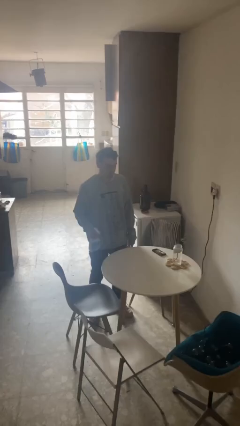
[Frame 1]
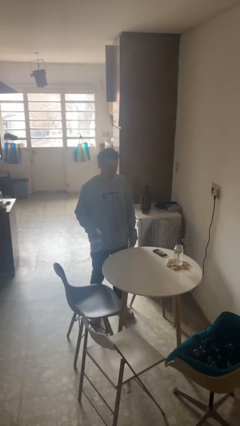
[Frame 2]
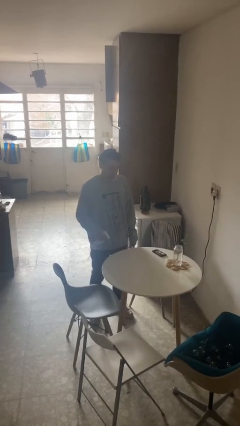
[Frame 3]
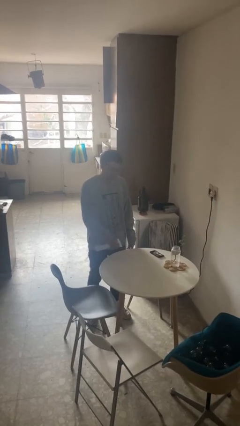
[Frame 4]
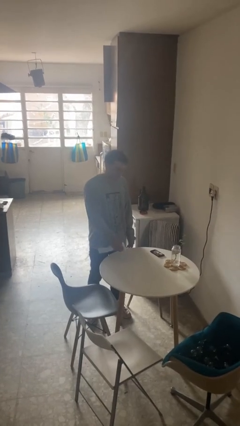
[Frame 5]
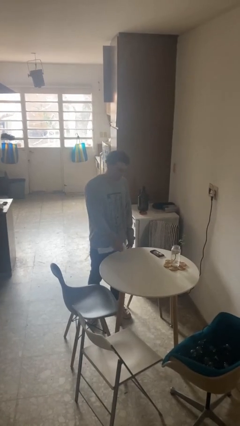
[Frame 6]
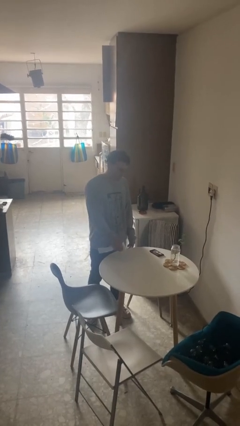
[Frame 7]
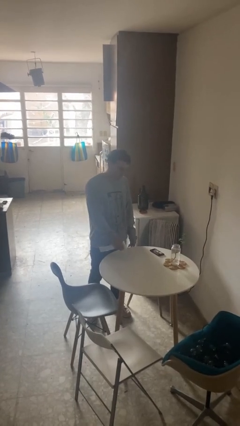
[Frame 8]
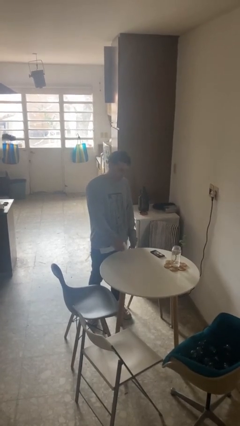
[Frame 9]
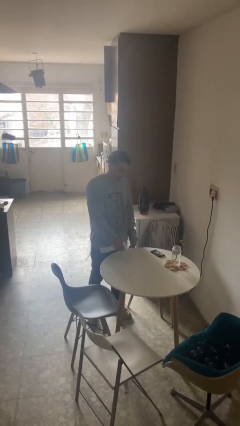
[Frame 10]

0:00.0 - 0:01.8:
person sprays from bottle

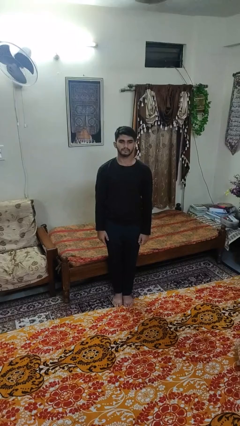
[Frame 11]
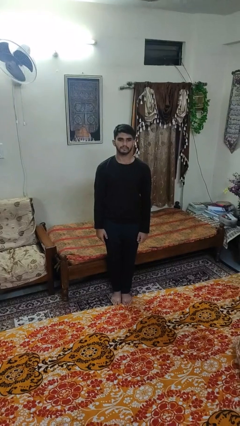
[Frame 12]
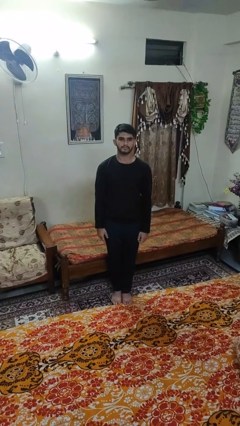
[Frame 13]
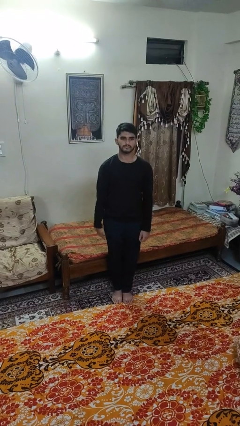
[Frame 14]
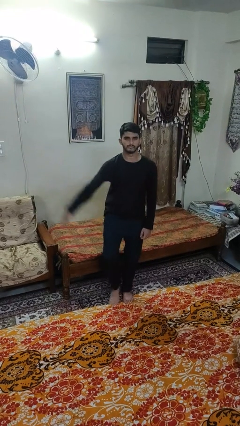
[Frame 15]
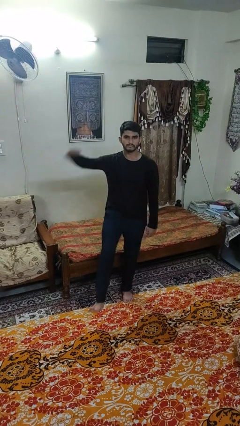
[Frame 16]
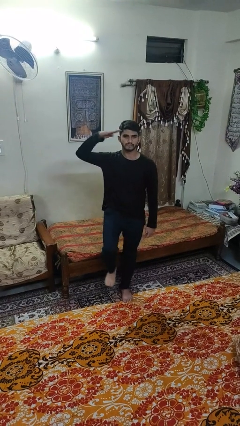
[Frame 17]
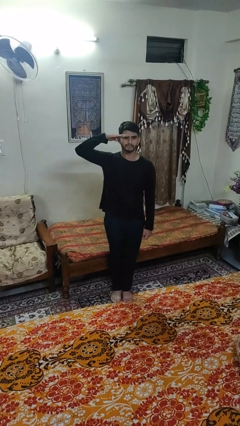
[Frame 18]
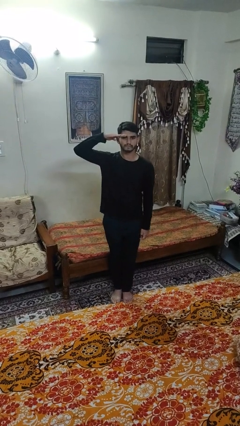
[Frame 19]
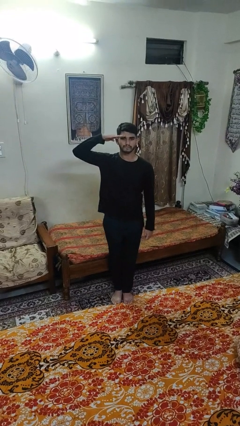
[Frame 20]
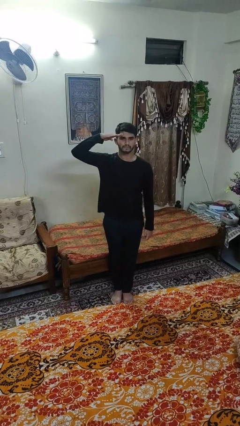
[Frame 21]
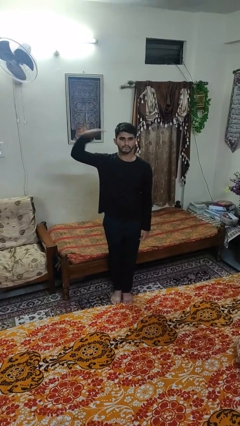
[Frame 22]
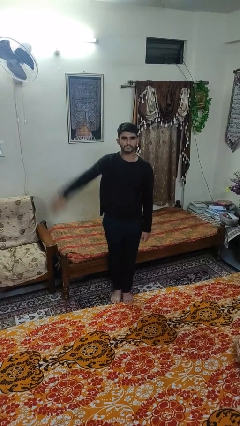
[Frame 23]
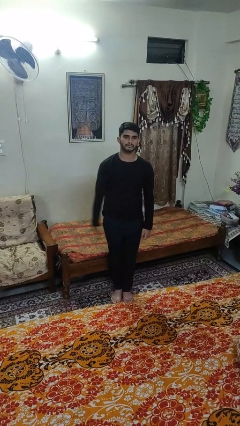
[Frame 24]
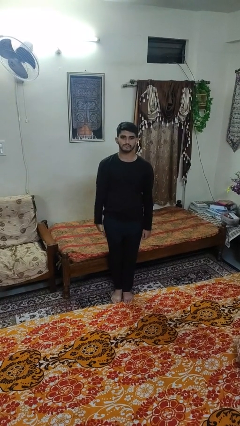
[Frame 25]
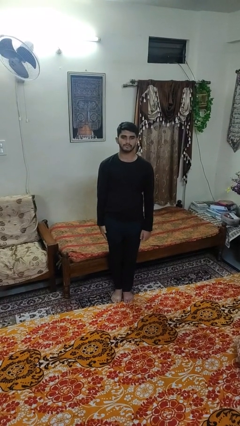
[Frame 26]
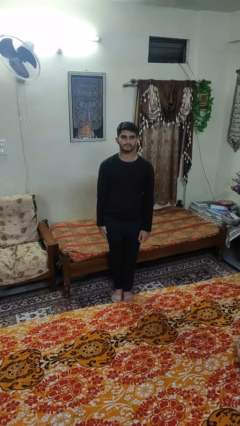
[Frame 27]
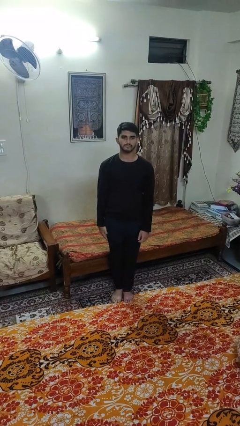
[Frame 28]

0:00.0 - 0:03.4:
person salutes

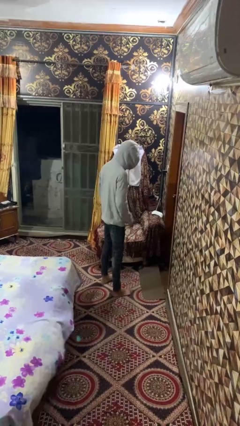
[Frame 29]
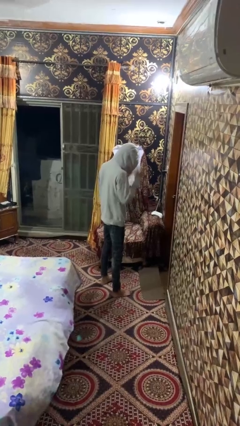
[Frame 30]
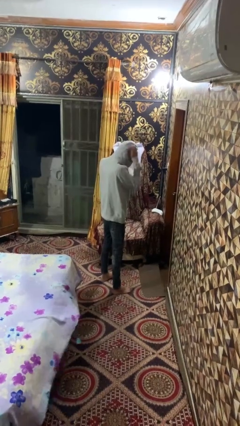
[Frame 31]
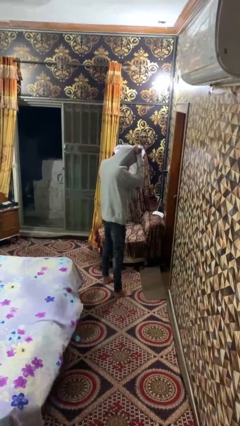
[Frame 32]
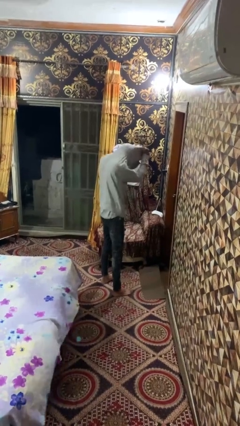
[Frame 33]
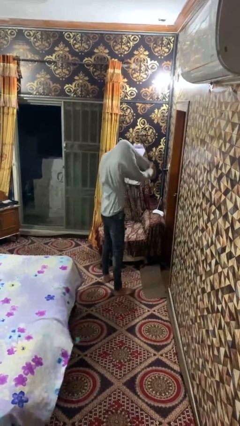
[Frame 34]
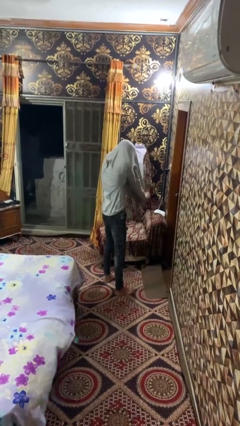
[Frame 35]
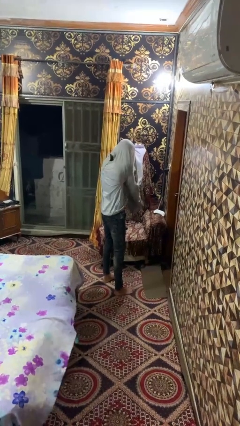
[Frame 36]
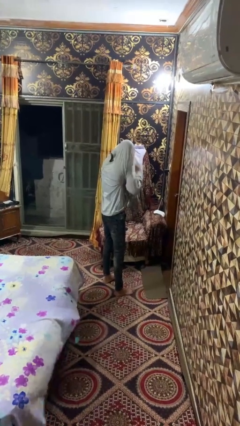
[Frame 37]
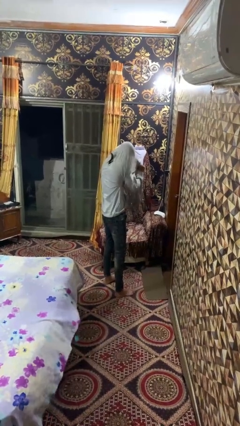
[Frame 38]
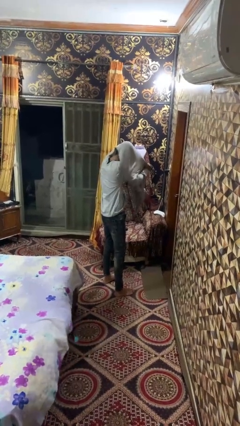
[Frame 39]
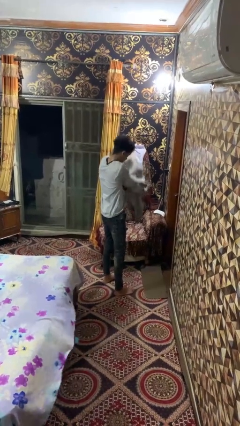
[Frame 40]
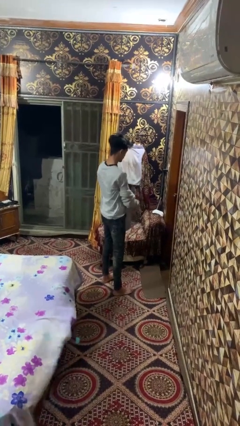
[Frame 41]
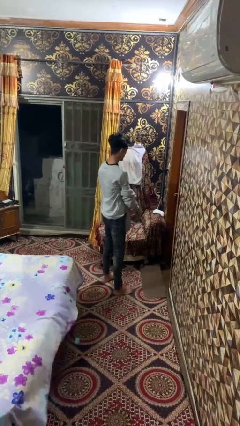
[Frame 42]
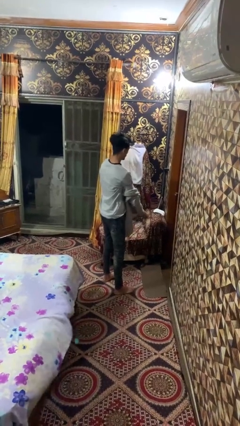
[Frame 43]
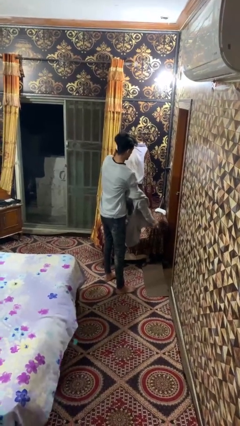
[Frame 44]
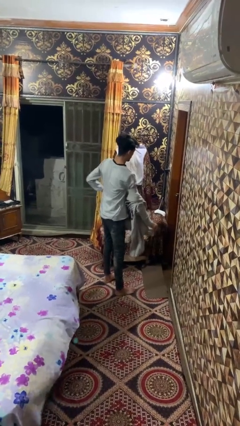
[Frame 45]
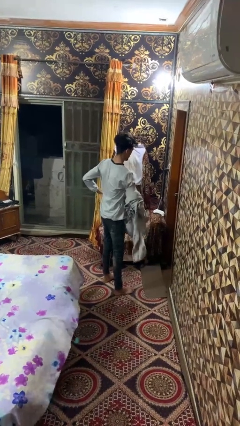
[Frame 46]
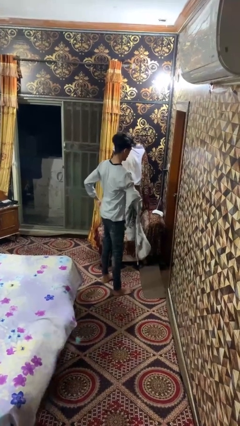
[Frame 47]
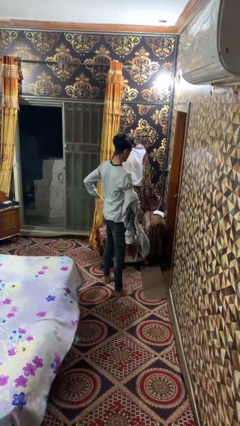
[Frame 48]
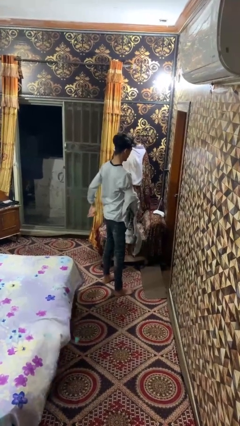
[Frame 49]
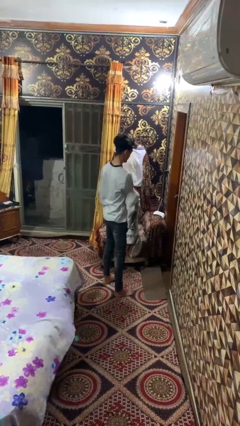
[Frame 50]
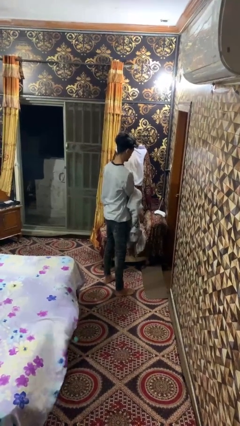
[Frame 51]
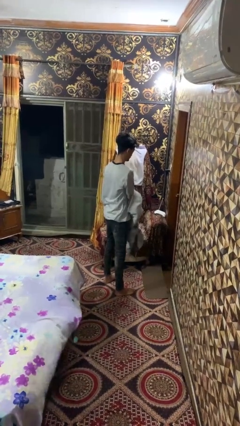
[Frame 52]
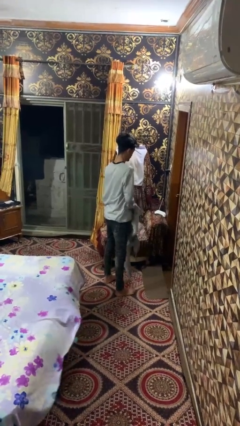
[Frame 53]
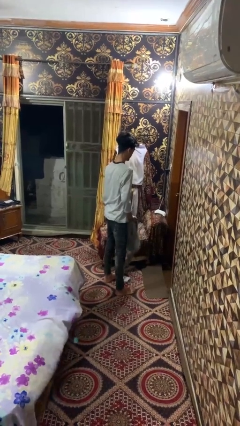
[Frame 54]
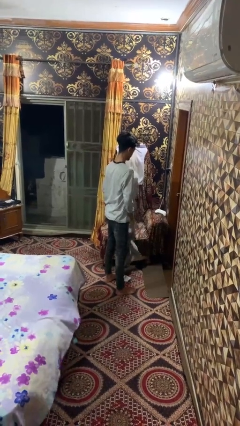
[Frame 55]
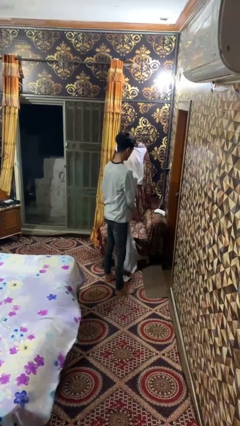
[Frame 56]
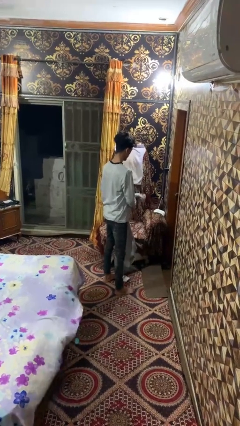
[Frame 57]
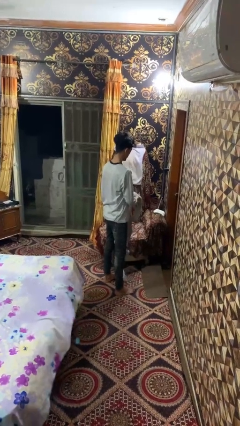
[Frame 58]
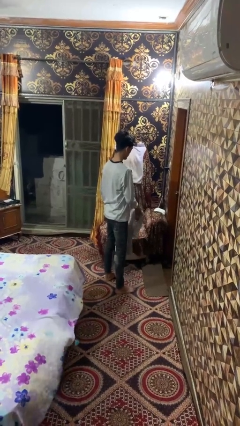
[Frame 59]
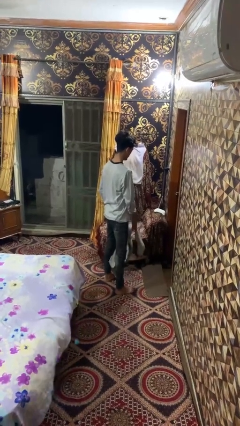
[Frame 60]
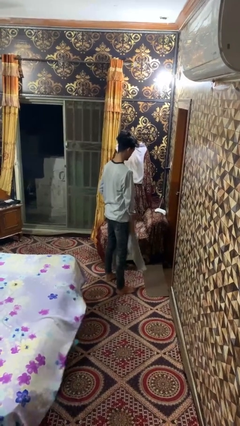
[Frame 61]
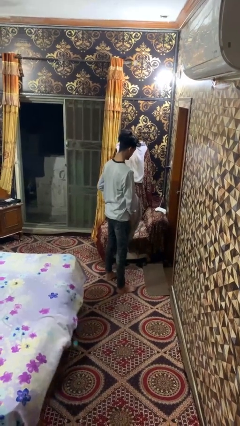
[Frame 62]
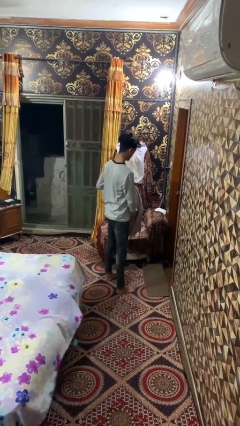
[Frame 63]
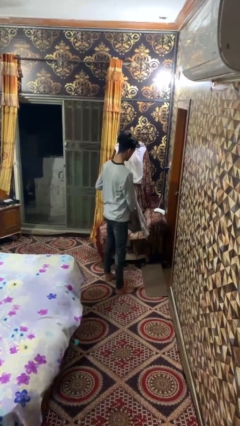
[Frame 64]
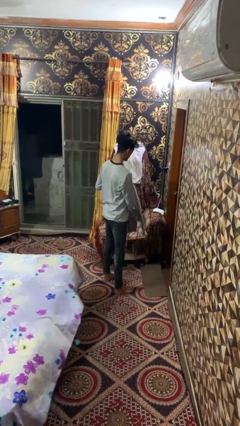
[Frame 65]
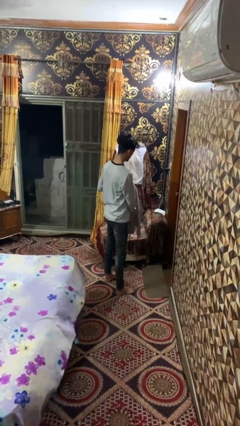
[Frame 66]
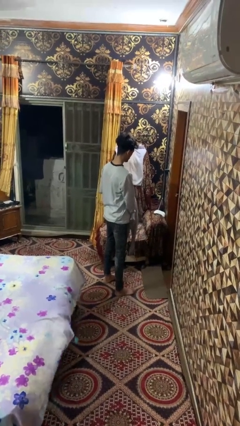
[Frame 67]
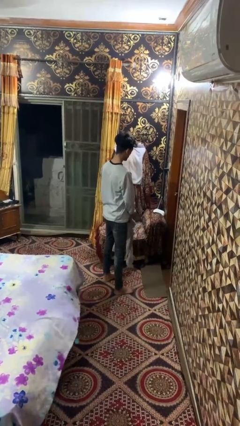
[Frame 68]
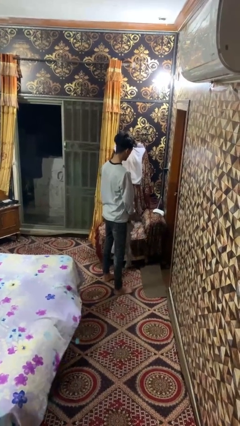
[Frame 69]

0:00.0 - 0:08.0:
person takes off hoodie

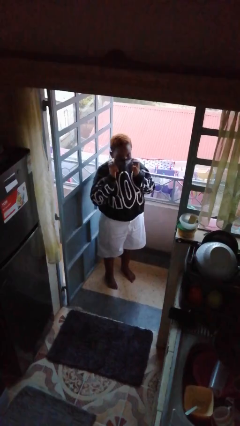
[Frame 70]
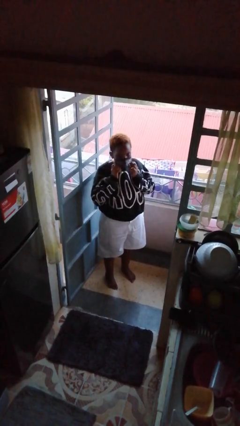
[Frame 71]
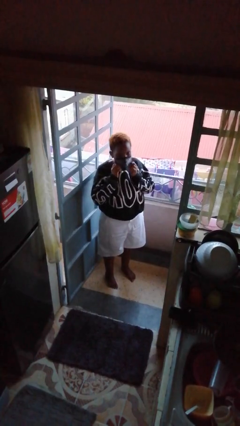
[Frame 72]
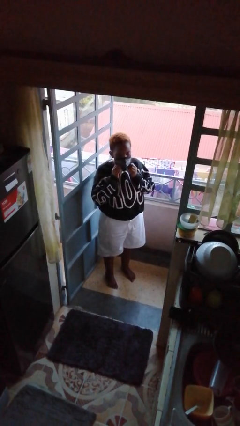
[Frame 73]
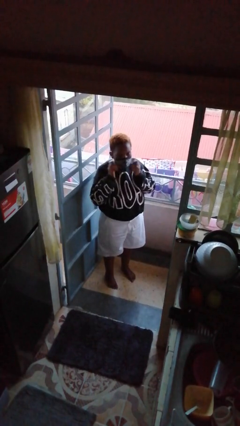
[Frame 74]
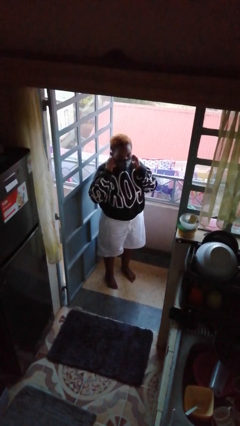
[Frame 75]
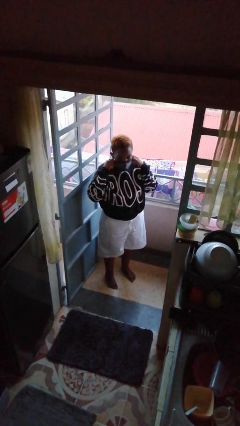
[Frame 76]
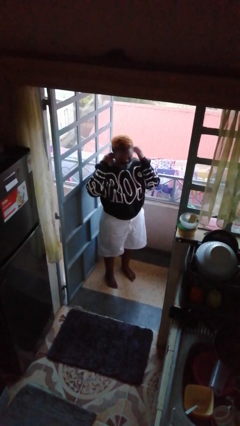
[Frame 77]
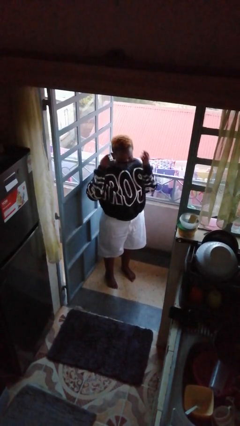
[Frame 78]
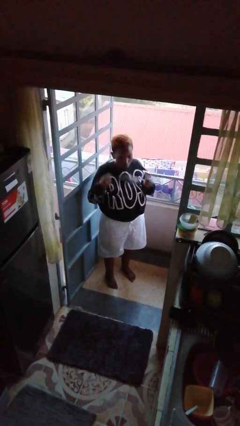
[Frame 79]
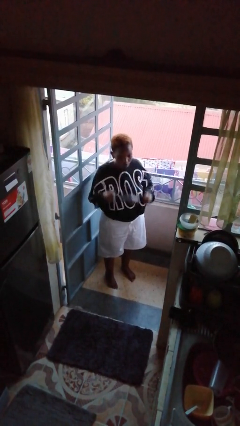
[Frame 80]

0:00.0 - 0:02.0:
person takes off facemask

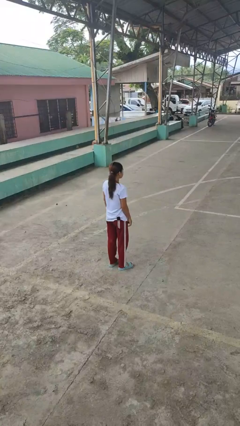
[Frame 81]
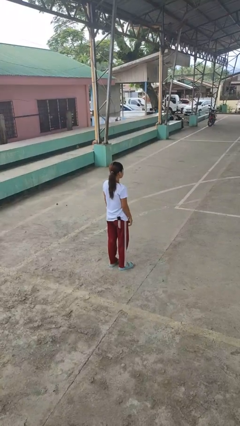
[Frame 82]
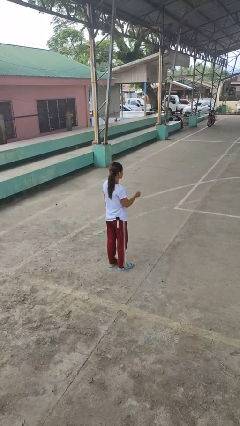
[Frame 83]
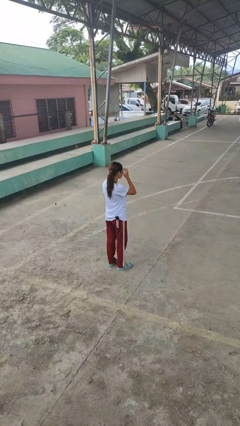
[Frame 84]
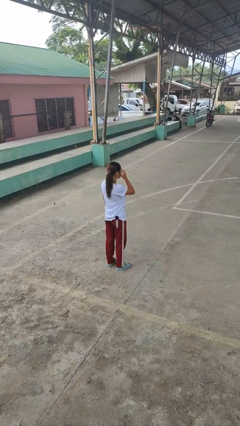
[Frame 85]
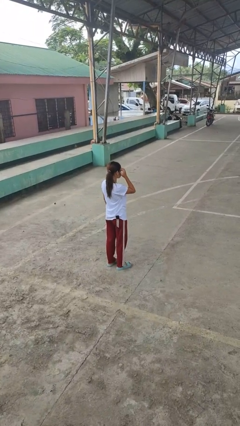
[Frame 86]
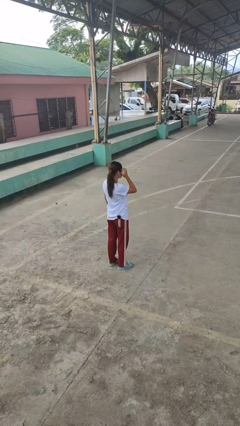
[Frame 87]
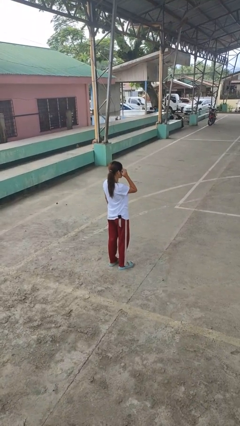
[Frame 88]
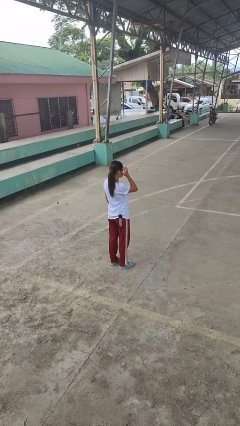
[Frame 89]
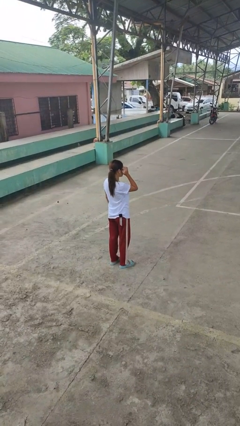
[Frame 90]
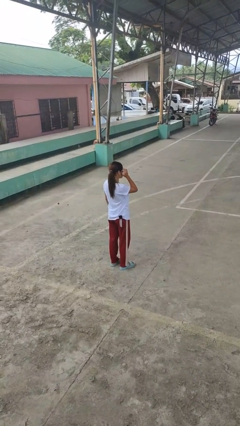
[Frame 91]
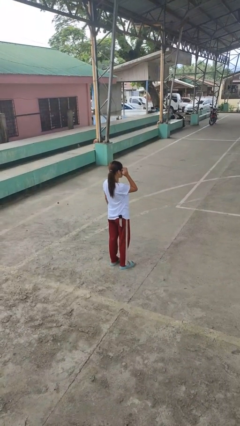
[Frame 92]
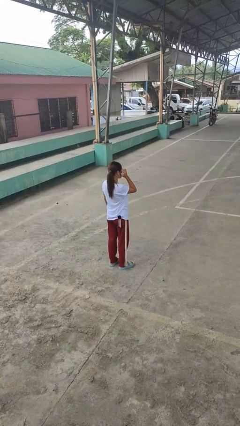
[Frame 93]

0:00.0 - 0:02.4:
person scratches face
